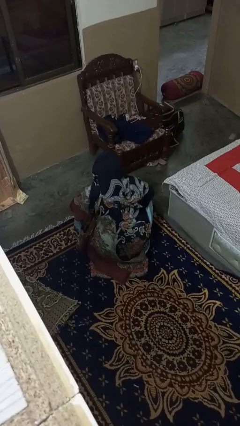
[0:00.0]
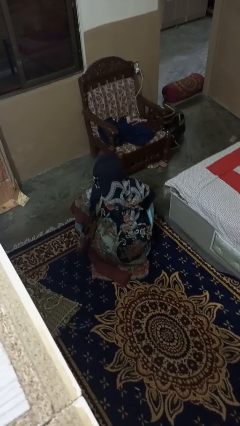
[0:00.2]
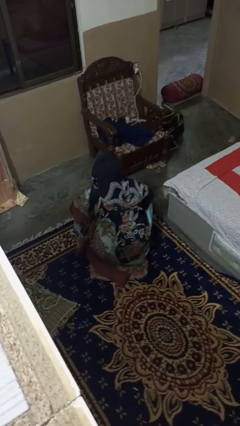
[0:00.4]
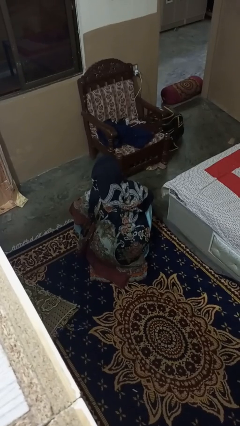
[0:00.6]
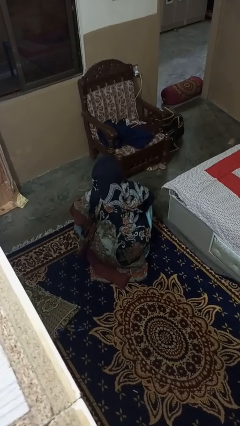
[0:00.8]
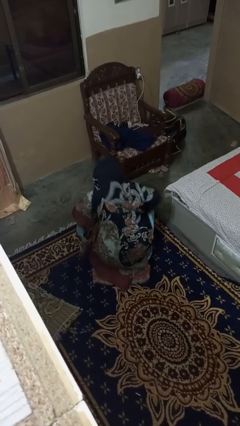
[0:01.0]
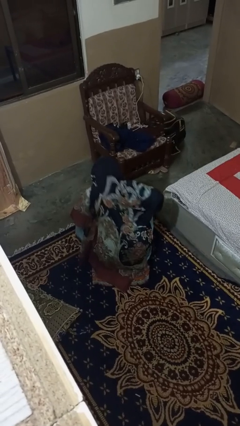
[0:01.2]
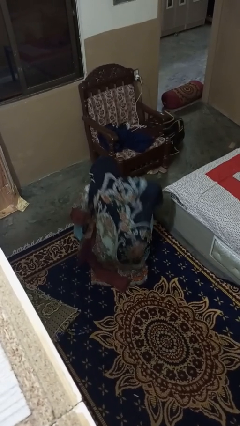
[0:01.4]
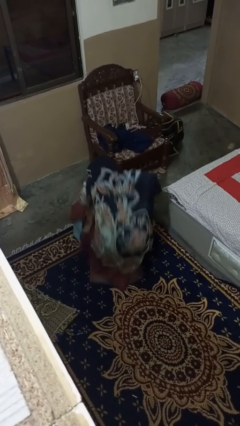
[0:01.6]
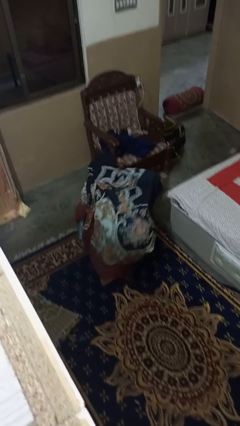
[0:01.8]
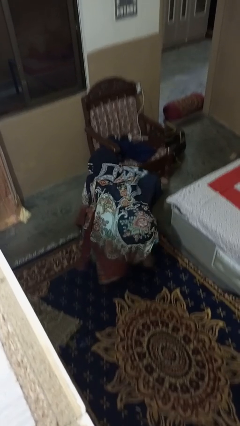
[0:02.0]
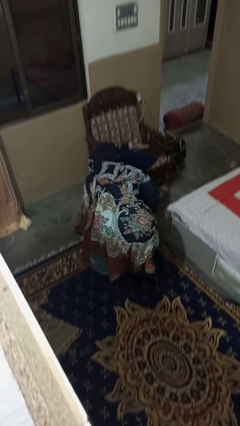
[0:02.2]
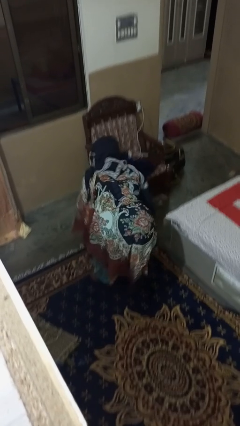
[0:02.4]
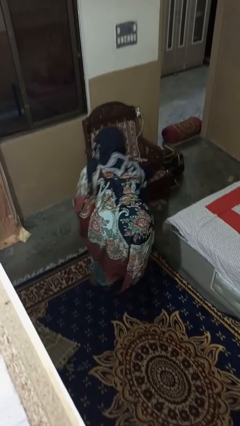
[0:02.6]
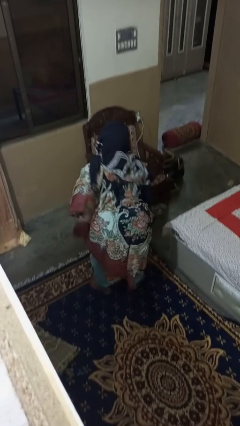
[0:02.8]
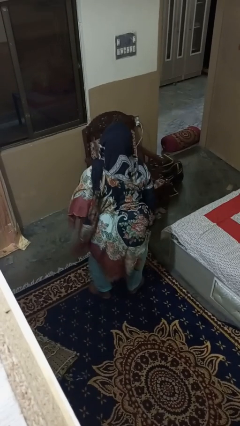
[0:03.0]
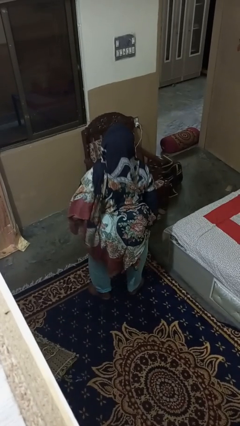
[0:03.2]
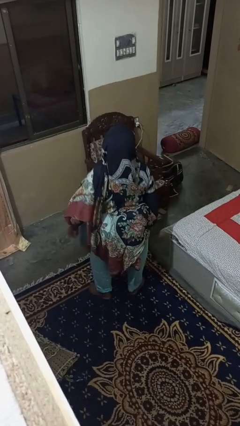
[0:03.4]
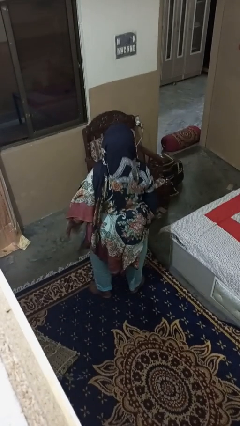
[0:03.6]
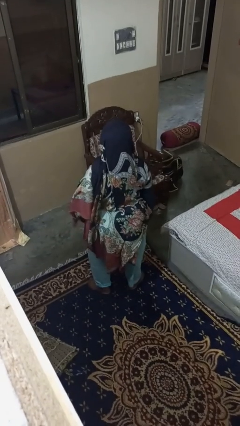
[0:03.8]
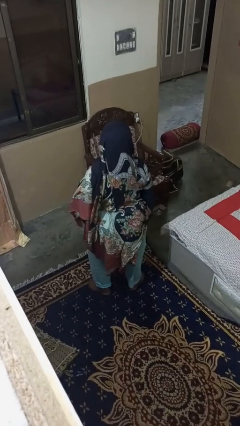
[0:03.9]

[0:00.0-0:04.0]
person stands up

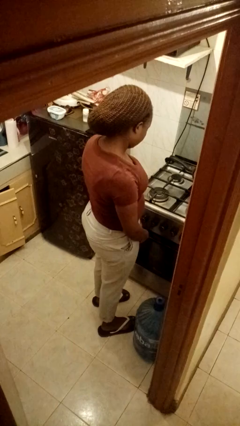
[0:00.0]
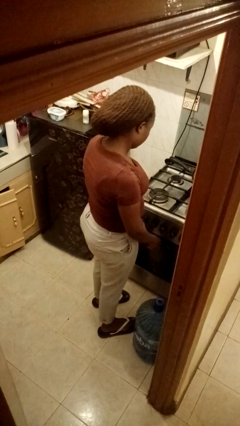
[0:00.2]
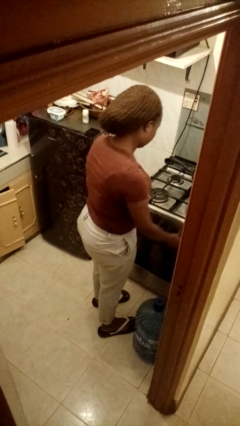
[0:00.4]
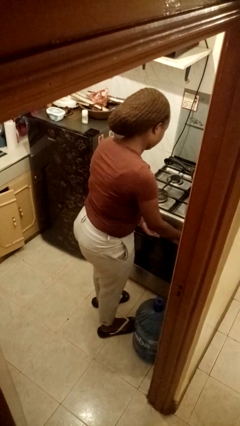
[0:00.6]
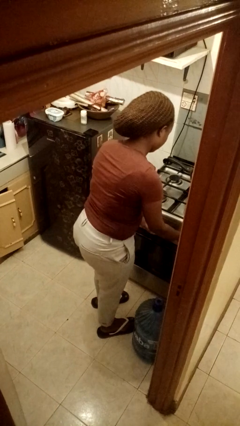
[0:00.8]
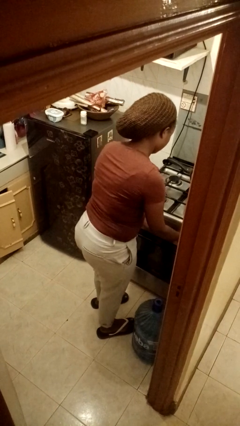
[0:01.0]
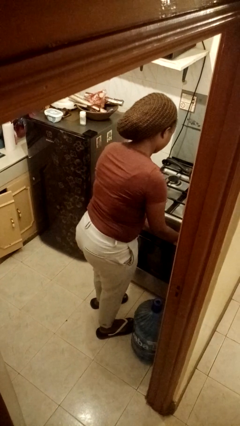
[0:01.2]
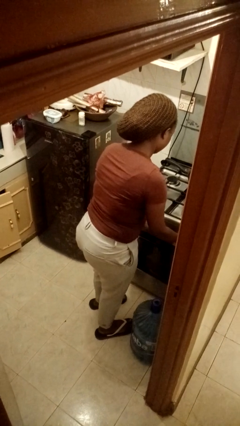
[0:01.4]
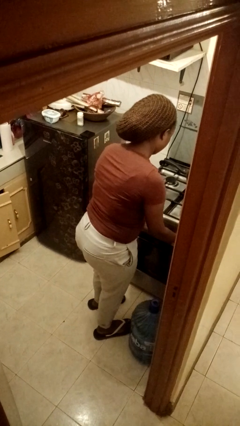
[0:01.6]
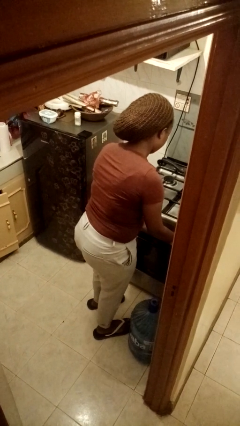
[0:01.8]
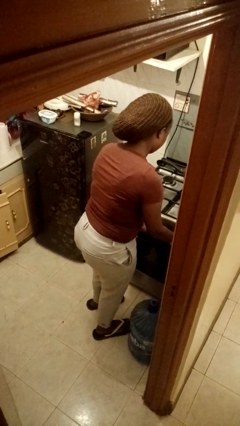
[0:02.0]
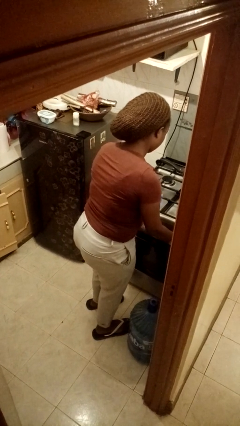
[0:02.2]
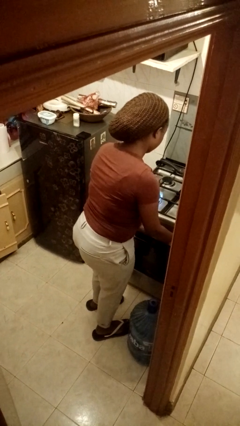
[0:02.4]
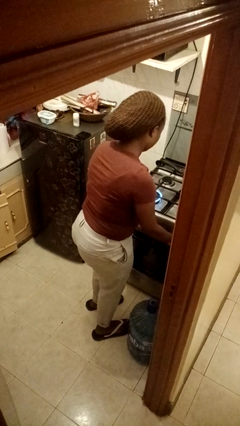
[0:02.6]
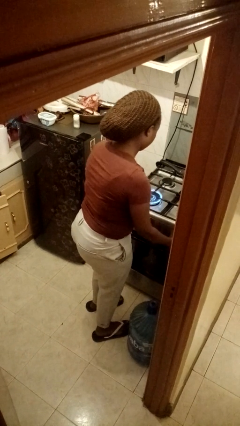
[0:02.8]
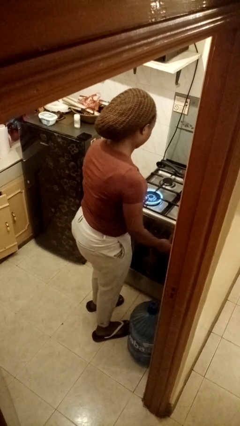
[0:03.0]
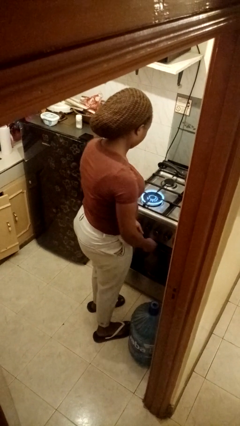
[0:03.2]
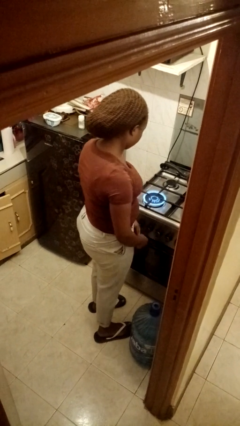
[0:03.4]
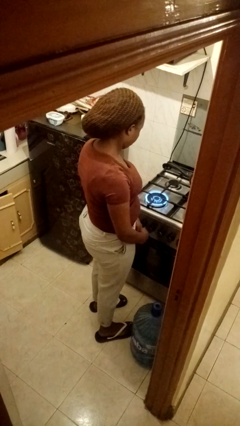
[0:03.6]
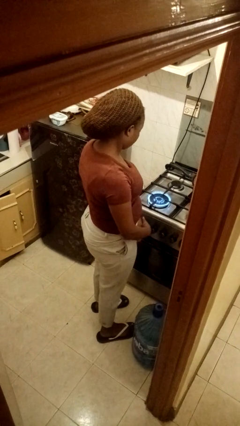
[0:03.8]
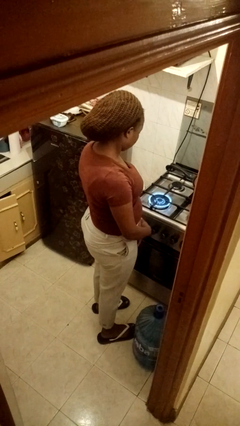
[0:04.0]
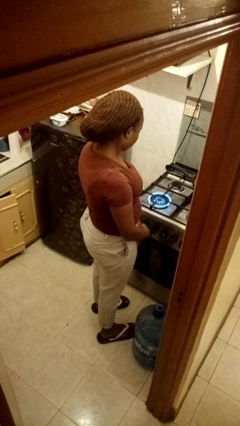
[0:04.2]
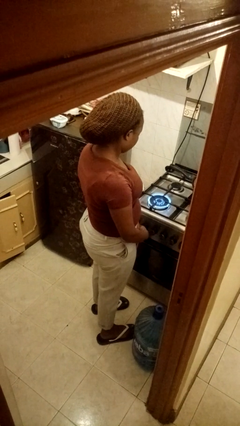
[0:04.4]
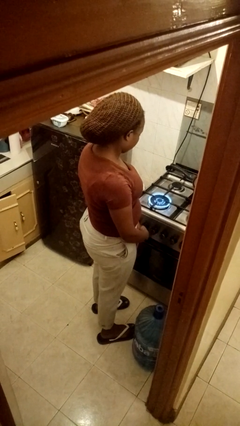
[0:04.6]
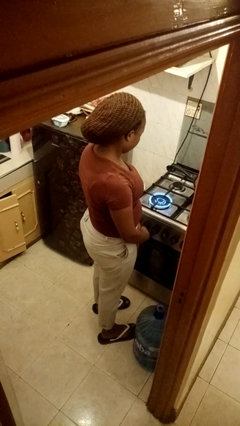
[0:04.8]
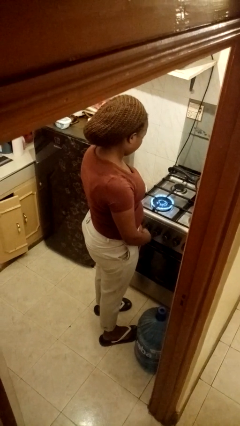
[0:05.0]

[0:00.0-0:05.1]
person turns on stovetop

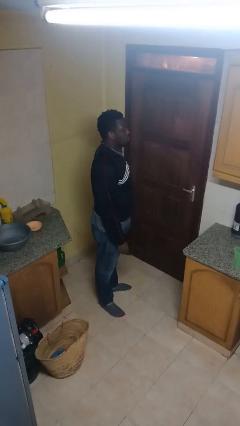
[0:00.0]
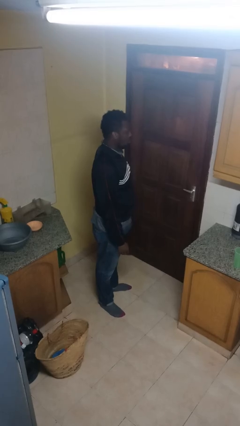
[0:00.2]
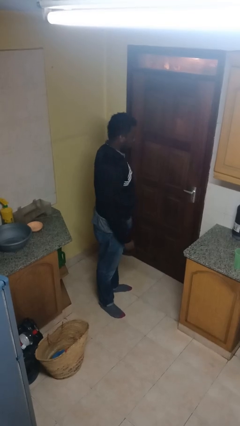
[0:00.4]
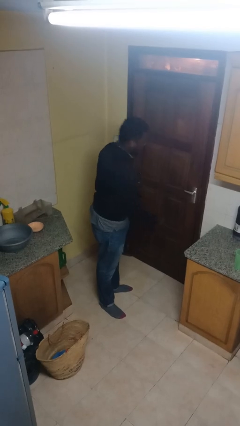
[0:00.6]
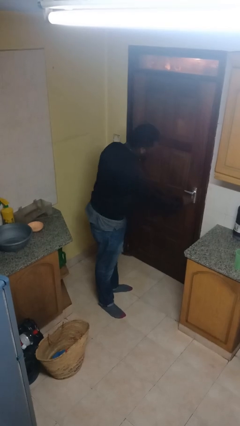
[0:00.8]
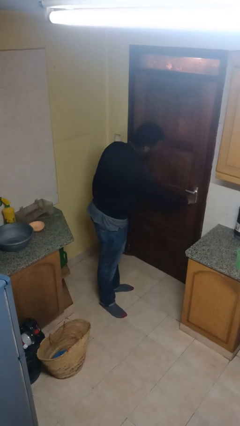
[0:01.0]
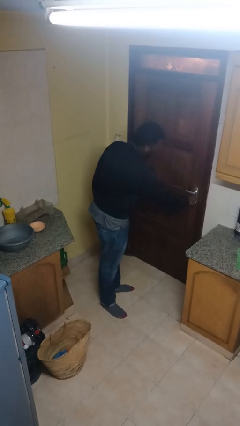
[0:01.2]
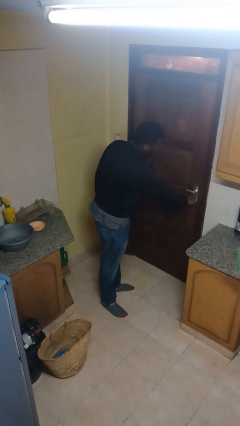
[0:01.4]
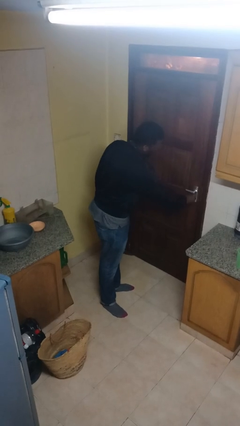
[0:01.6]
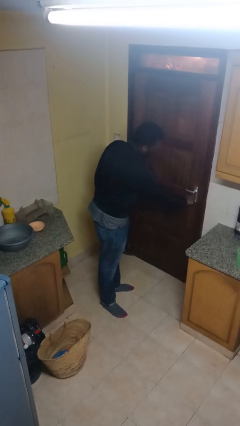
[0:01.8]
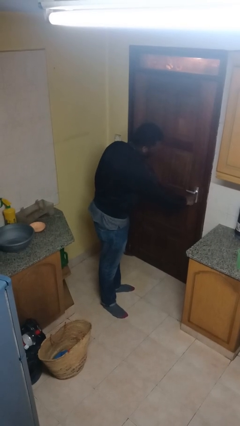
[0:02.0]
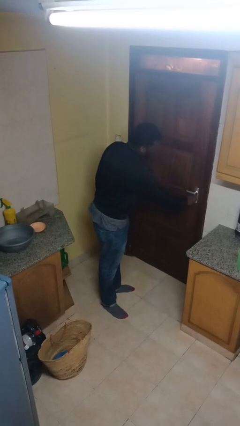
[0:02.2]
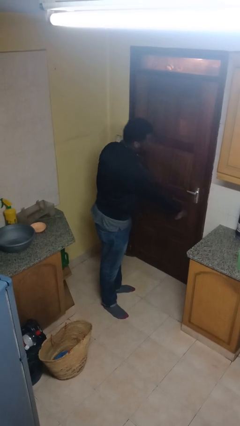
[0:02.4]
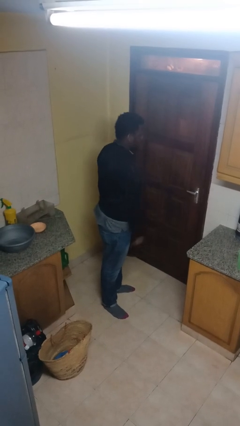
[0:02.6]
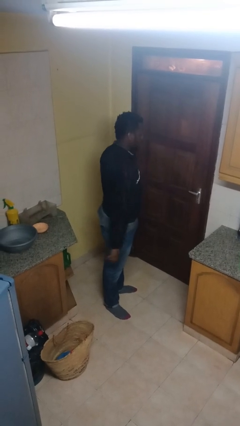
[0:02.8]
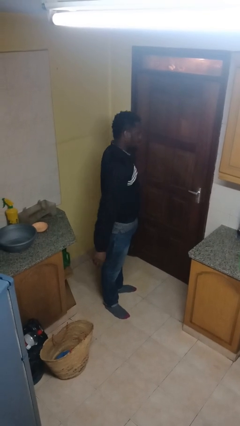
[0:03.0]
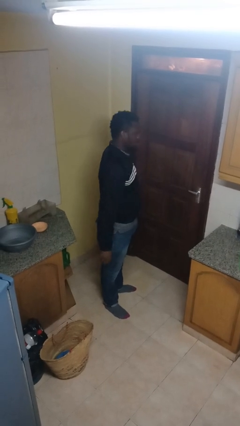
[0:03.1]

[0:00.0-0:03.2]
person unlocks door with keys

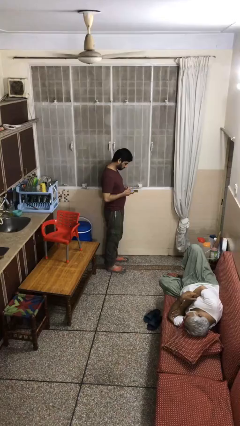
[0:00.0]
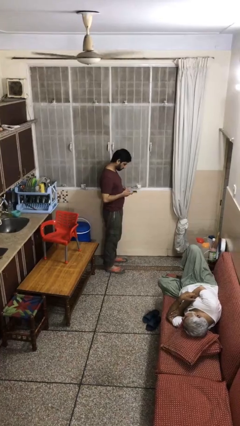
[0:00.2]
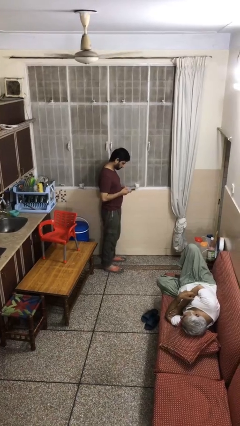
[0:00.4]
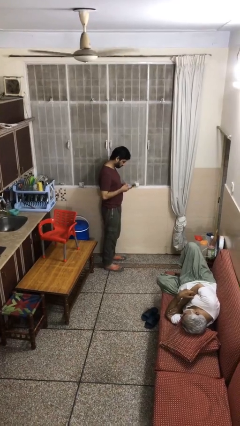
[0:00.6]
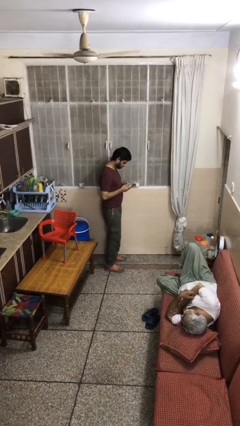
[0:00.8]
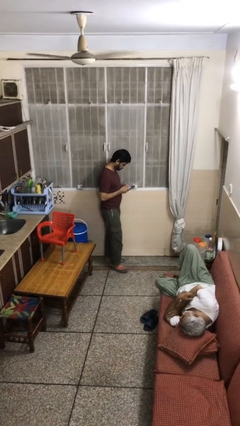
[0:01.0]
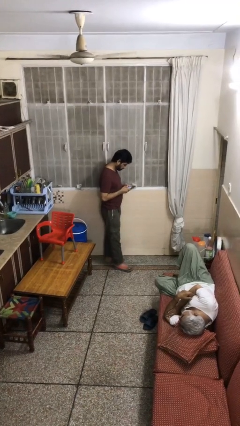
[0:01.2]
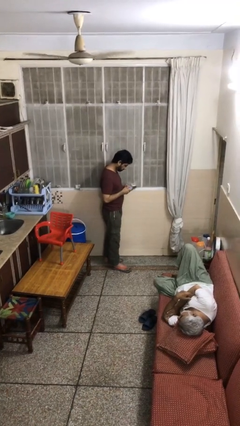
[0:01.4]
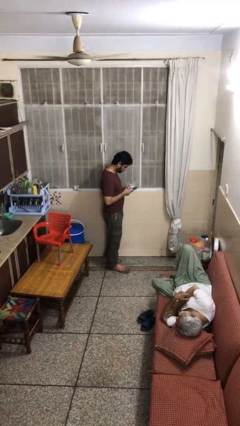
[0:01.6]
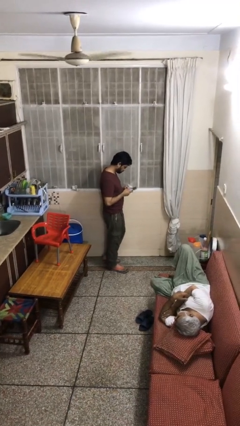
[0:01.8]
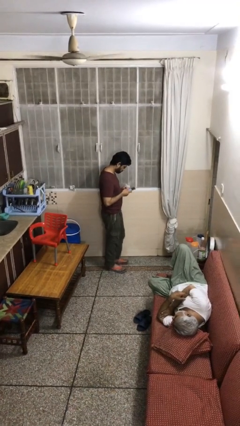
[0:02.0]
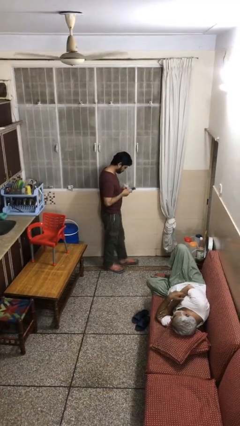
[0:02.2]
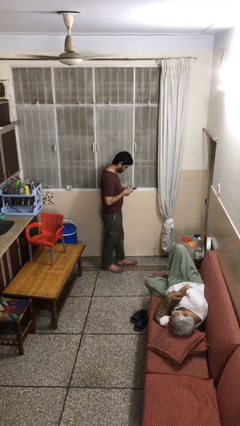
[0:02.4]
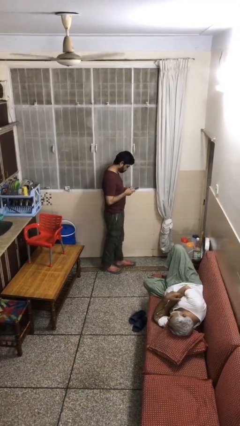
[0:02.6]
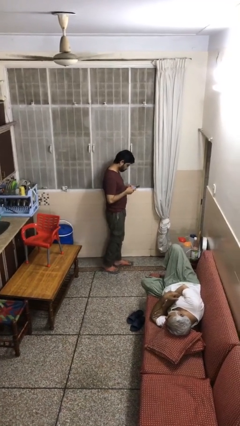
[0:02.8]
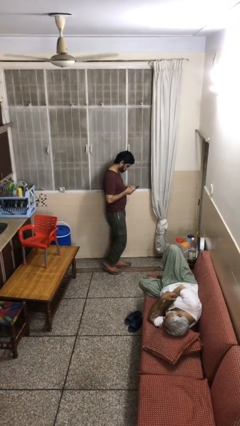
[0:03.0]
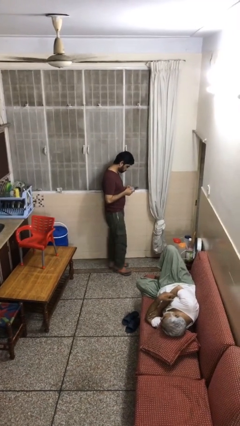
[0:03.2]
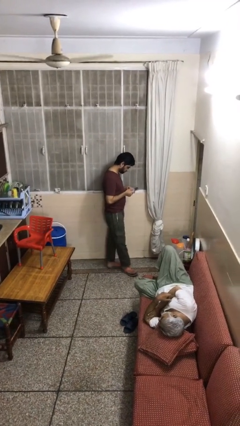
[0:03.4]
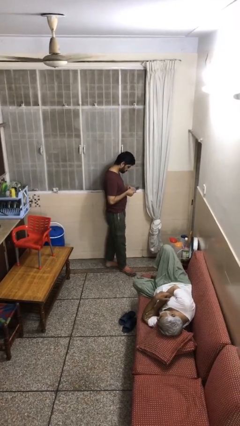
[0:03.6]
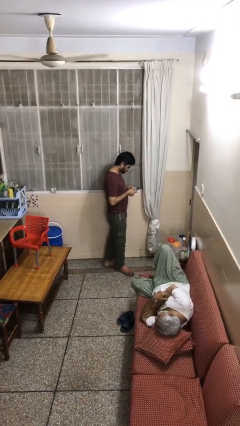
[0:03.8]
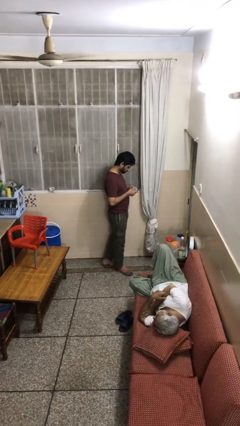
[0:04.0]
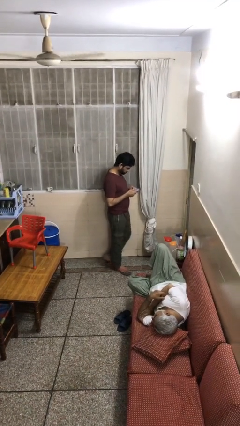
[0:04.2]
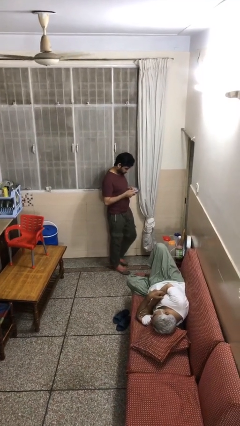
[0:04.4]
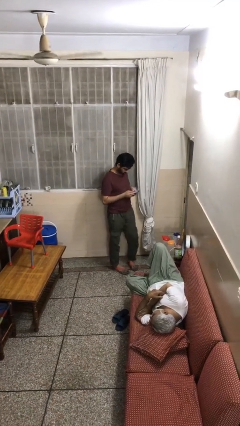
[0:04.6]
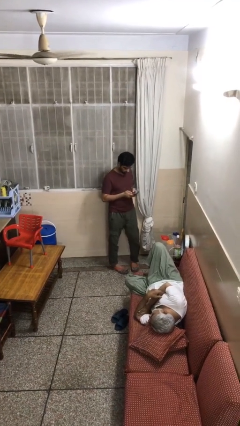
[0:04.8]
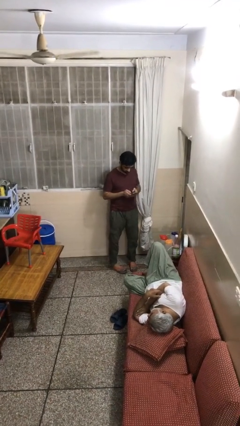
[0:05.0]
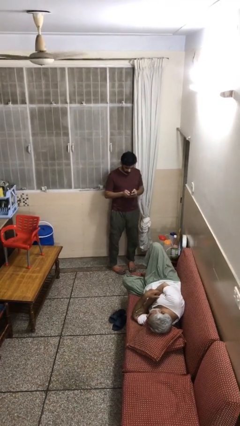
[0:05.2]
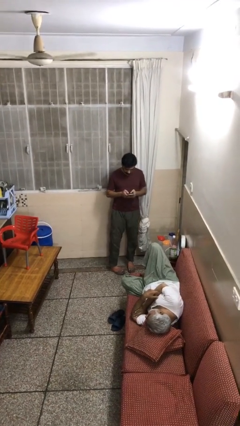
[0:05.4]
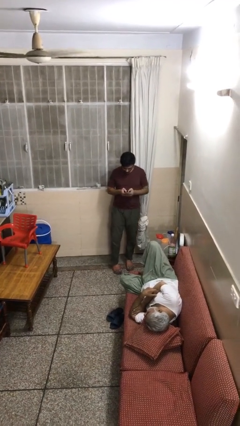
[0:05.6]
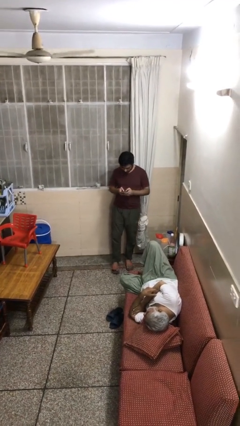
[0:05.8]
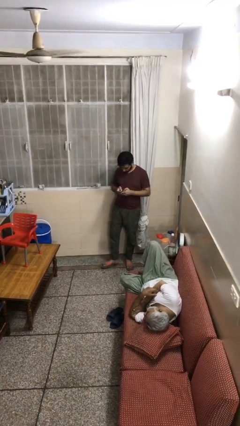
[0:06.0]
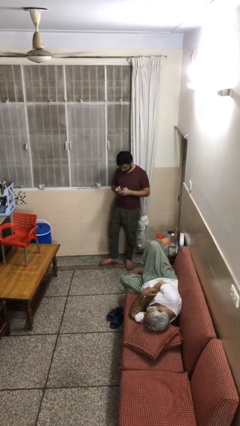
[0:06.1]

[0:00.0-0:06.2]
person texts on phone
